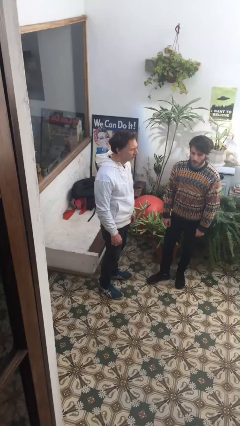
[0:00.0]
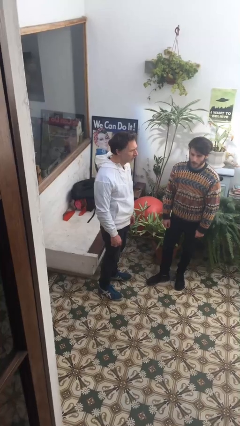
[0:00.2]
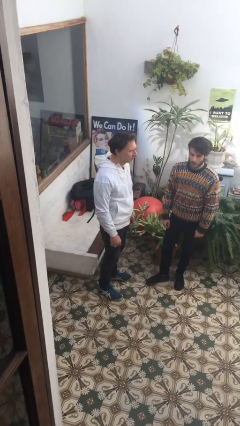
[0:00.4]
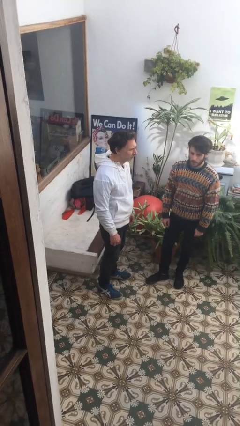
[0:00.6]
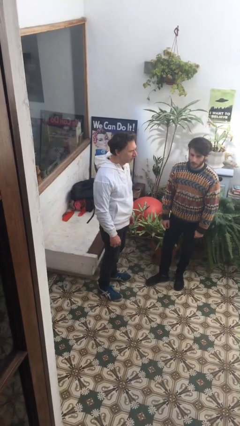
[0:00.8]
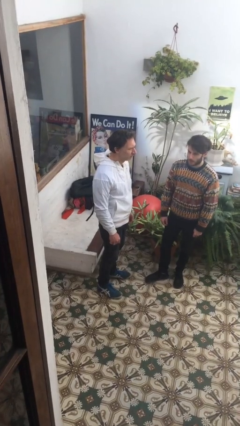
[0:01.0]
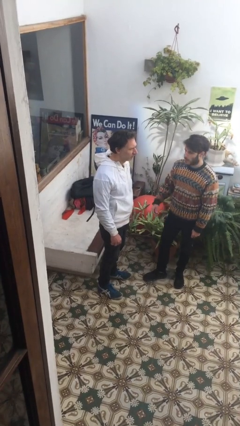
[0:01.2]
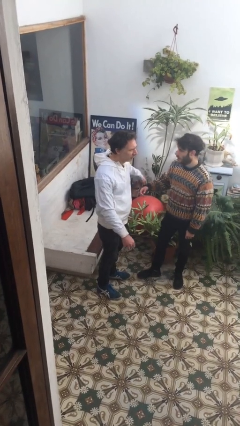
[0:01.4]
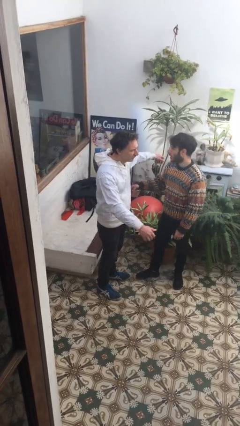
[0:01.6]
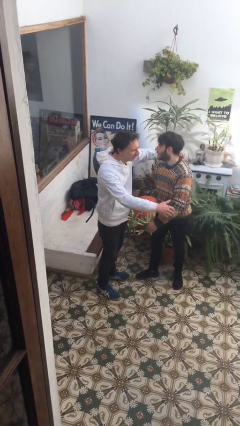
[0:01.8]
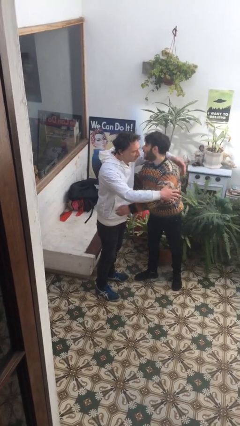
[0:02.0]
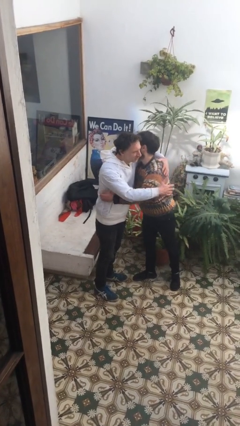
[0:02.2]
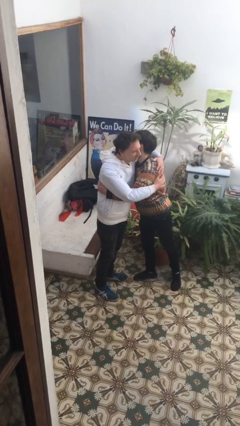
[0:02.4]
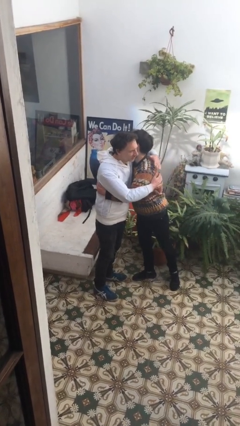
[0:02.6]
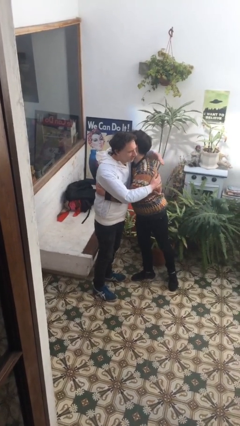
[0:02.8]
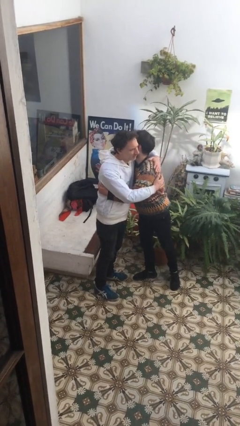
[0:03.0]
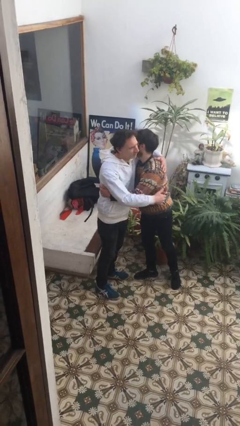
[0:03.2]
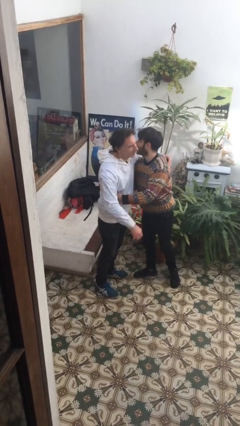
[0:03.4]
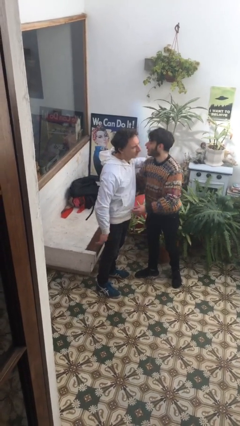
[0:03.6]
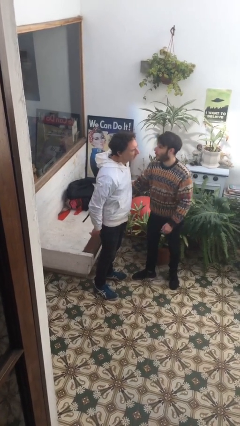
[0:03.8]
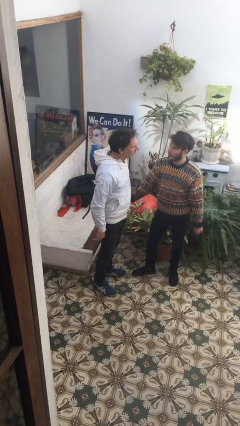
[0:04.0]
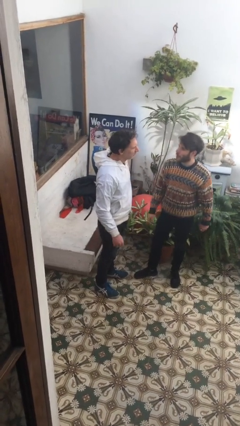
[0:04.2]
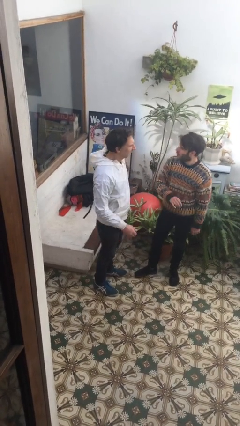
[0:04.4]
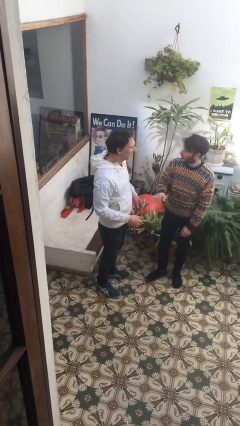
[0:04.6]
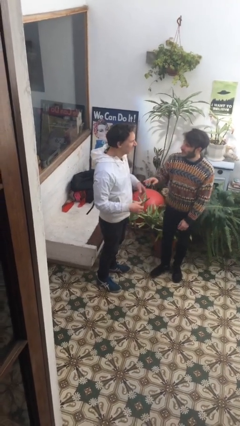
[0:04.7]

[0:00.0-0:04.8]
person embraces person

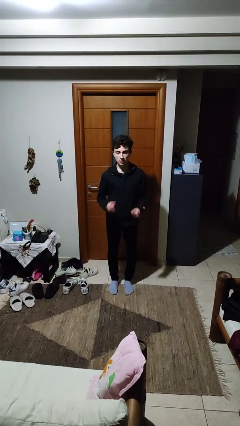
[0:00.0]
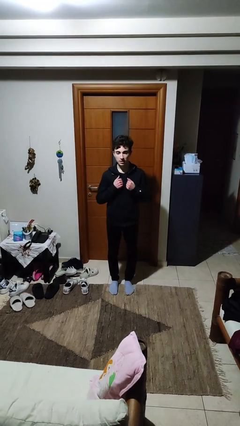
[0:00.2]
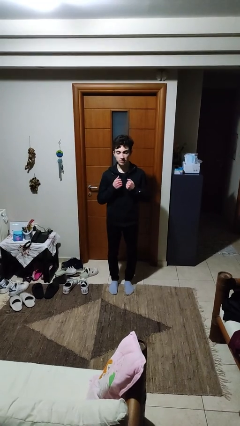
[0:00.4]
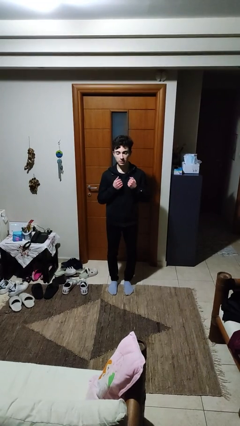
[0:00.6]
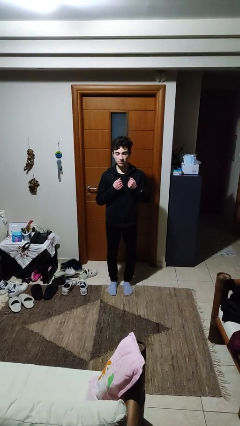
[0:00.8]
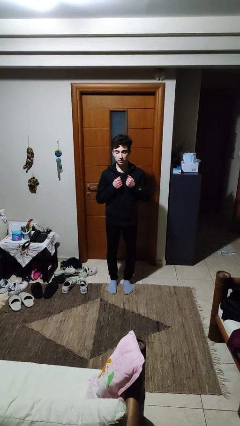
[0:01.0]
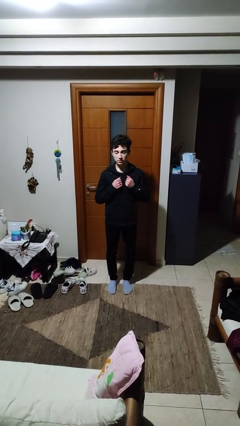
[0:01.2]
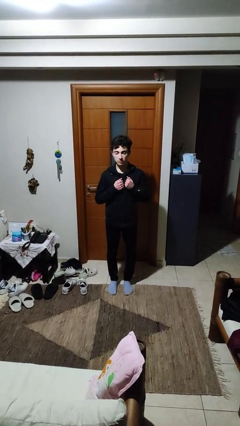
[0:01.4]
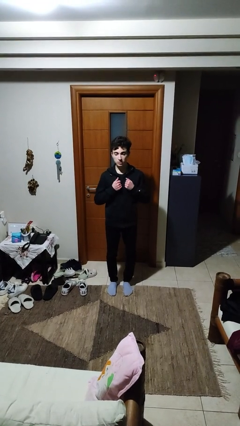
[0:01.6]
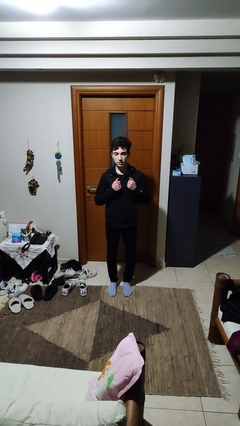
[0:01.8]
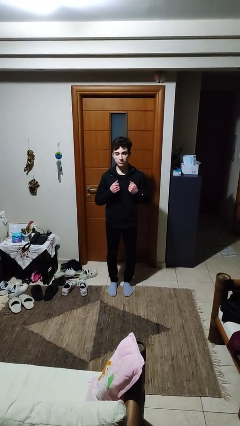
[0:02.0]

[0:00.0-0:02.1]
person drums on chest

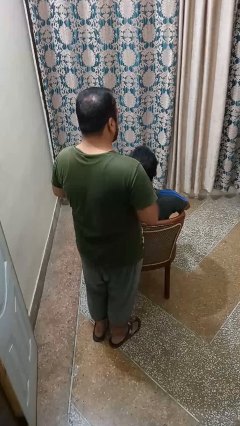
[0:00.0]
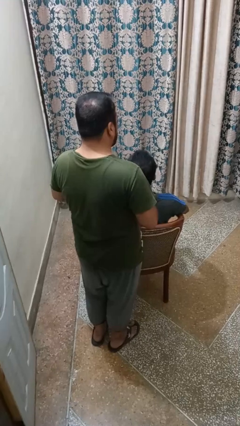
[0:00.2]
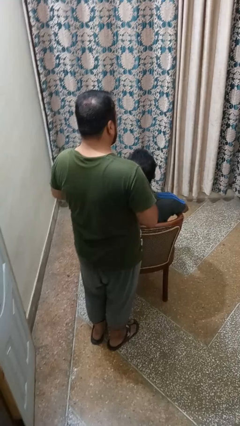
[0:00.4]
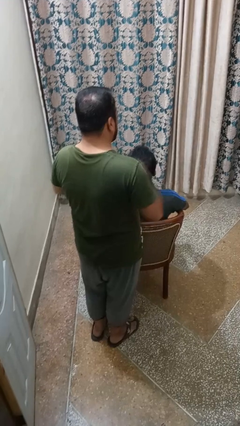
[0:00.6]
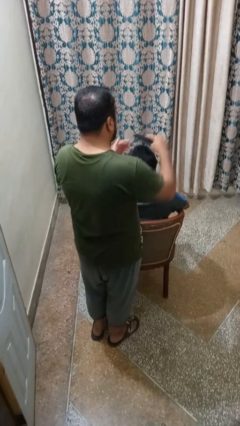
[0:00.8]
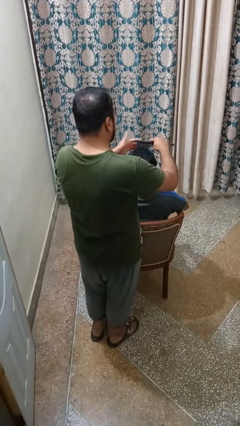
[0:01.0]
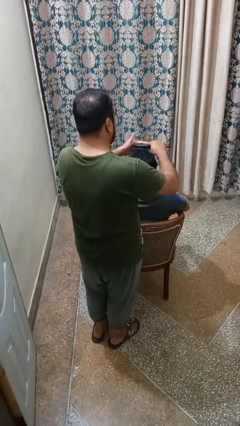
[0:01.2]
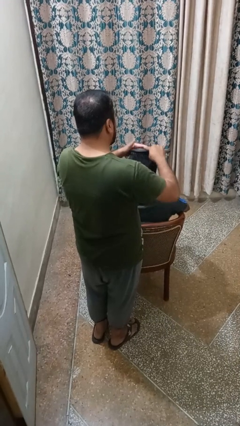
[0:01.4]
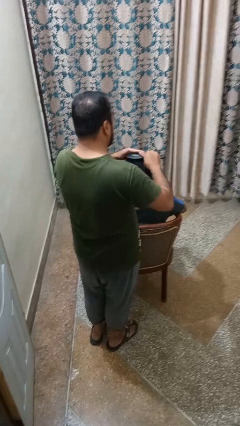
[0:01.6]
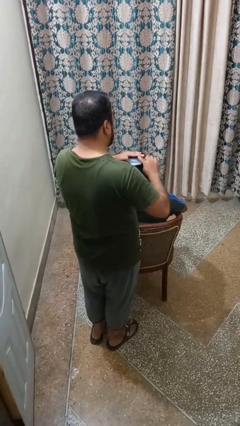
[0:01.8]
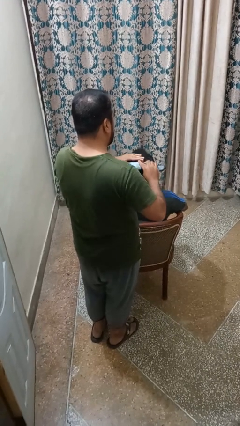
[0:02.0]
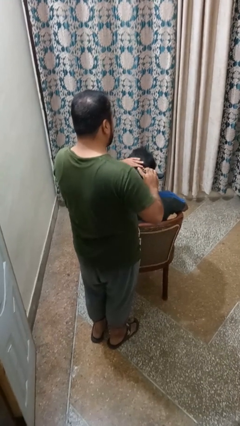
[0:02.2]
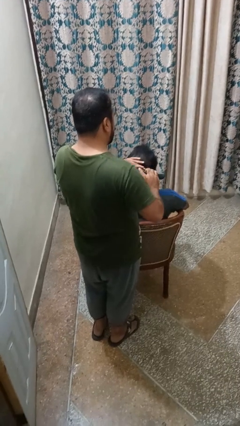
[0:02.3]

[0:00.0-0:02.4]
person brushes hair of person

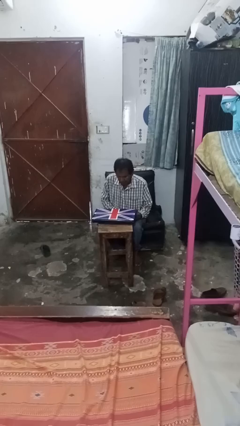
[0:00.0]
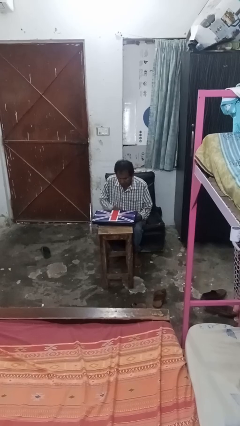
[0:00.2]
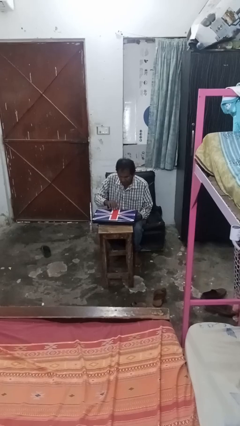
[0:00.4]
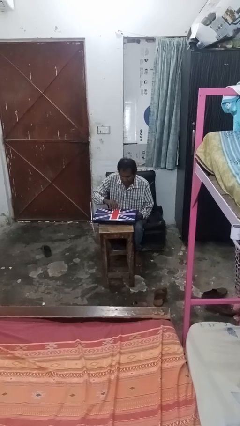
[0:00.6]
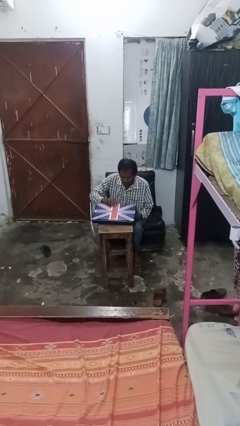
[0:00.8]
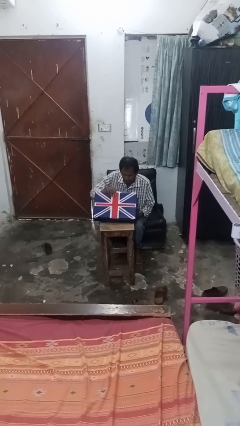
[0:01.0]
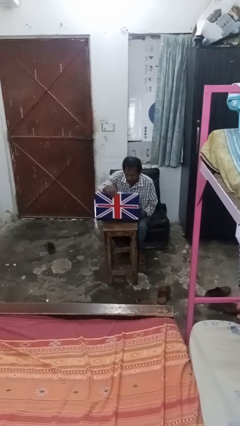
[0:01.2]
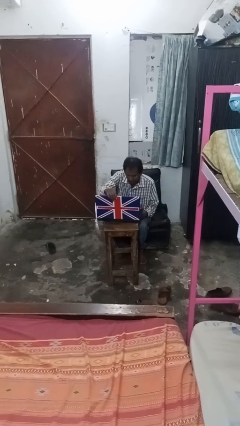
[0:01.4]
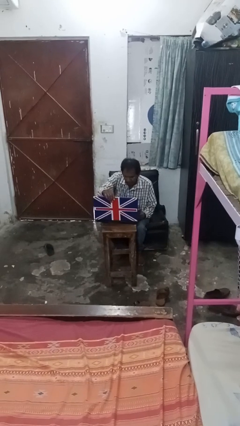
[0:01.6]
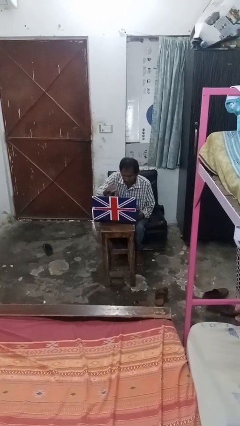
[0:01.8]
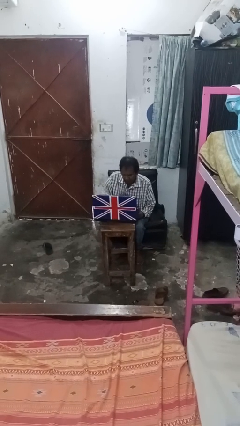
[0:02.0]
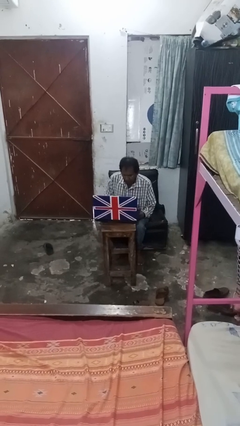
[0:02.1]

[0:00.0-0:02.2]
person opens laptop

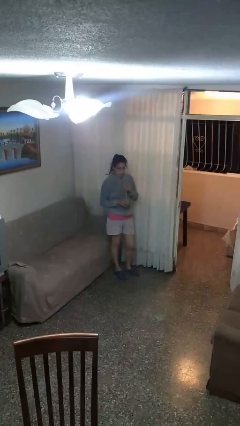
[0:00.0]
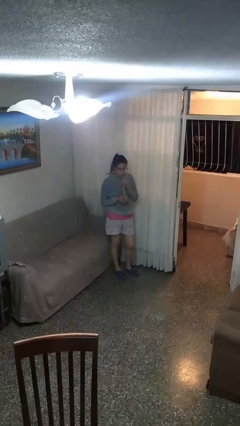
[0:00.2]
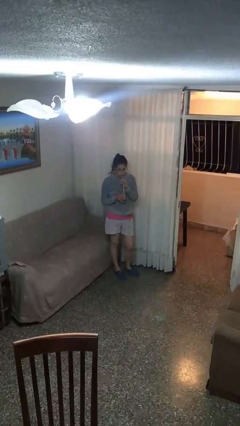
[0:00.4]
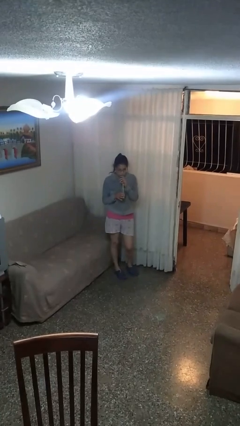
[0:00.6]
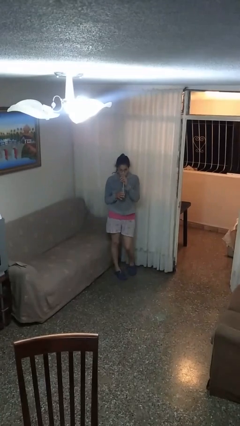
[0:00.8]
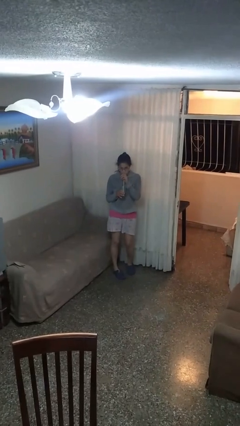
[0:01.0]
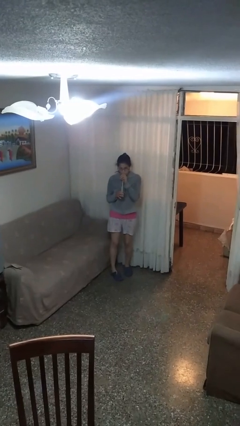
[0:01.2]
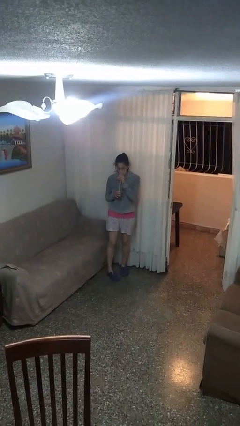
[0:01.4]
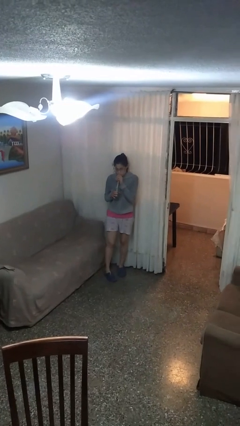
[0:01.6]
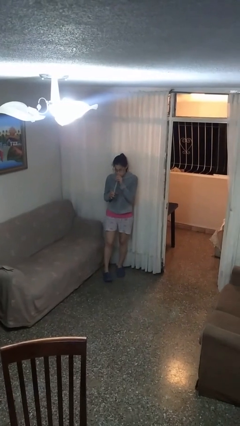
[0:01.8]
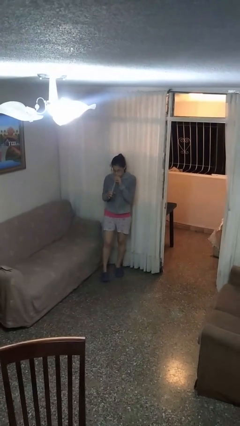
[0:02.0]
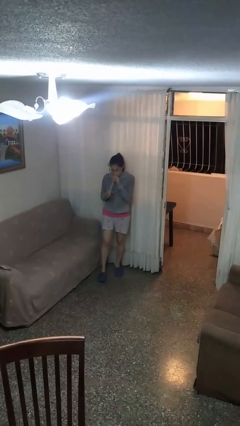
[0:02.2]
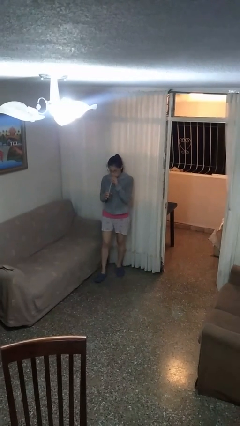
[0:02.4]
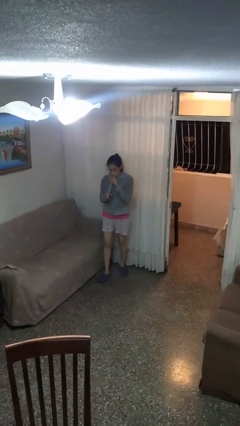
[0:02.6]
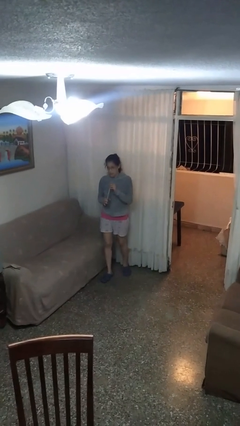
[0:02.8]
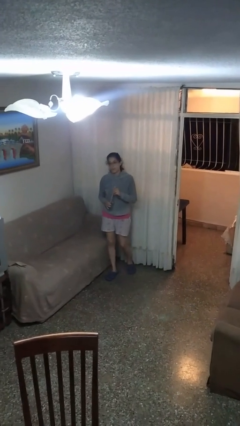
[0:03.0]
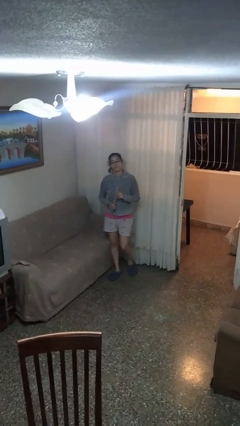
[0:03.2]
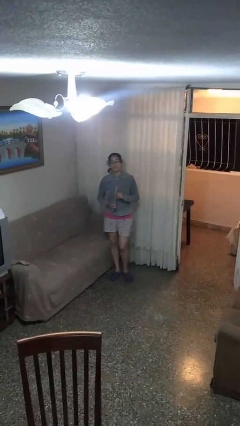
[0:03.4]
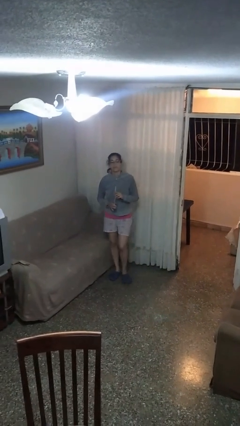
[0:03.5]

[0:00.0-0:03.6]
person drinks from straw

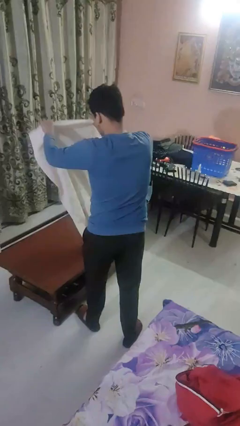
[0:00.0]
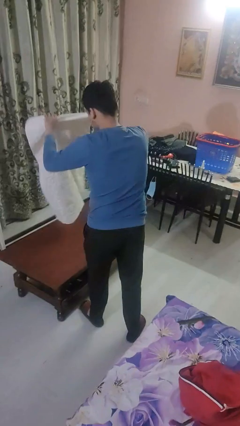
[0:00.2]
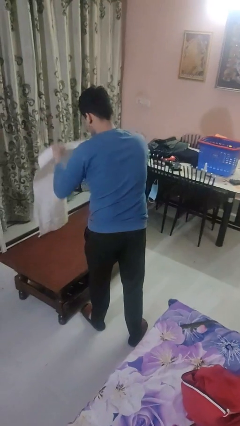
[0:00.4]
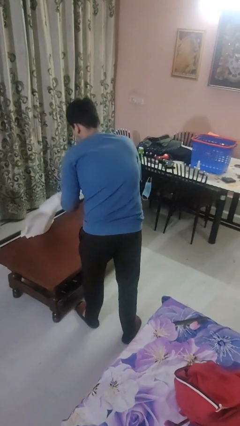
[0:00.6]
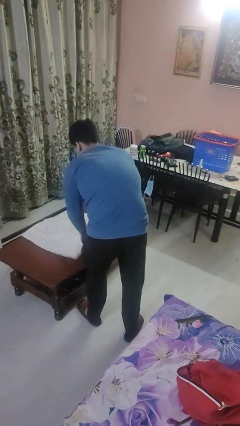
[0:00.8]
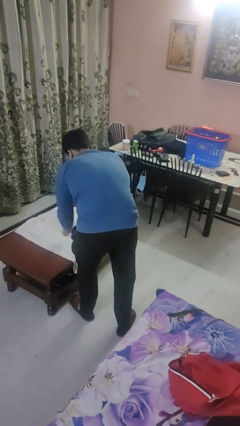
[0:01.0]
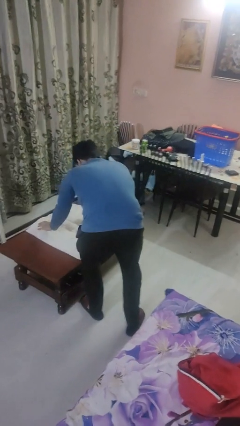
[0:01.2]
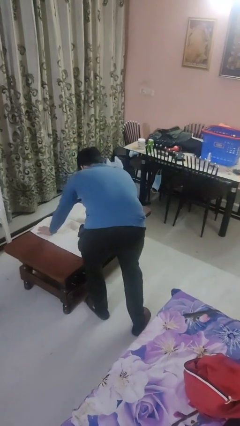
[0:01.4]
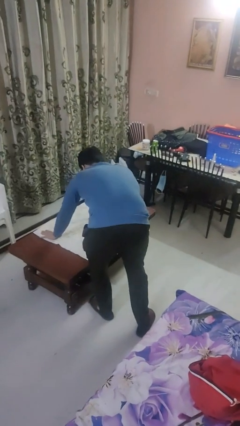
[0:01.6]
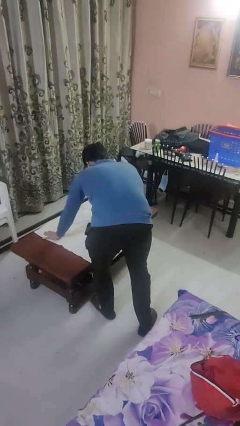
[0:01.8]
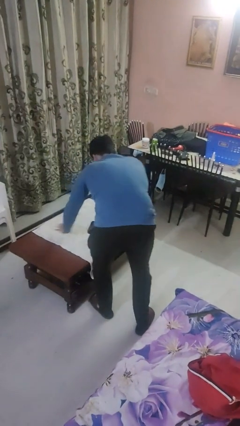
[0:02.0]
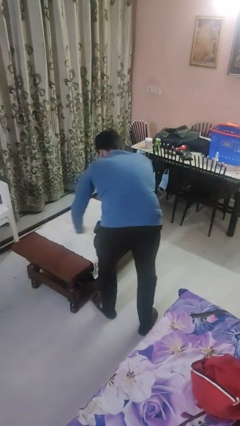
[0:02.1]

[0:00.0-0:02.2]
person spreads tablecloth
